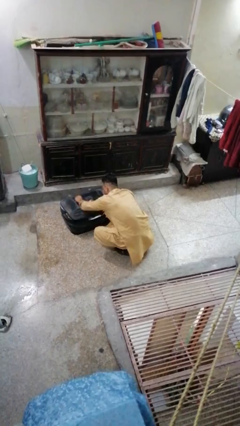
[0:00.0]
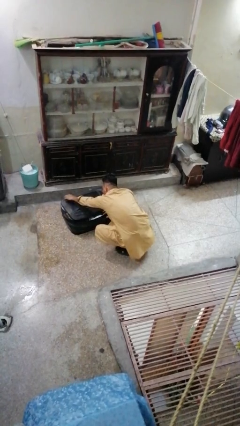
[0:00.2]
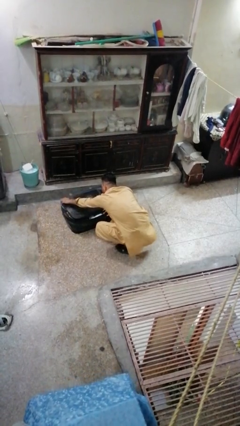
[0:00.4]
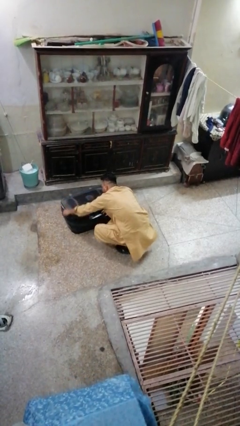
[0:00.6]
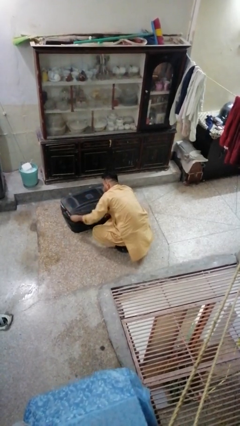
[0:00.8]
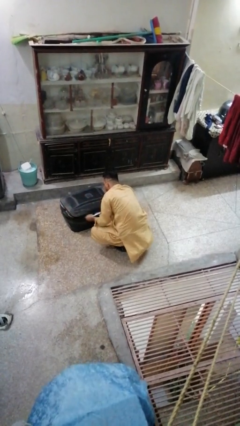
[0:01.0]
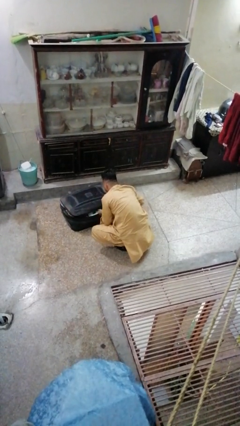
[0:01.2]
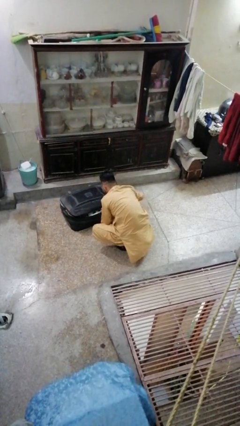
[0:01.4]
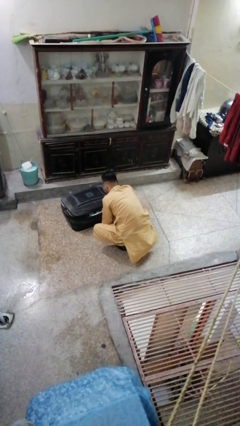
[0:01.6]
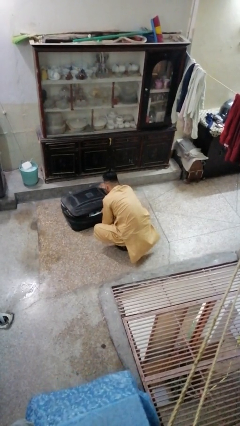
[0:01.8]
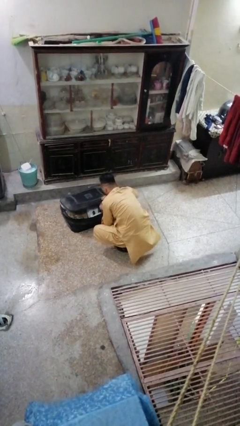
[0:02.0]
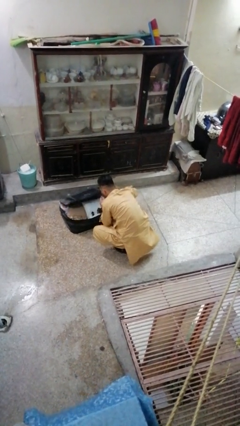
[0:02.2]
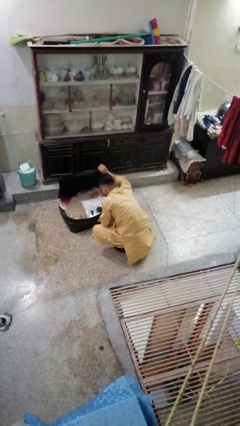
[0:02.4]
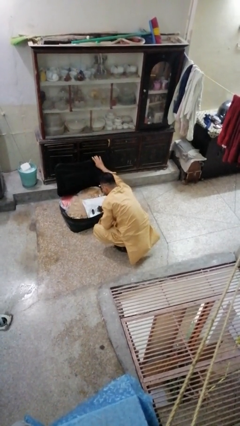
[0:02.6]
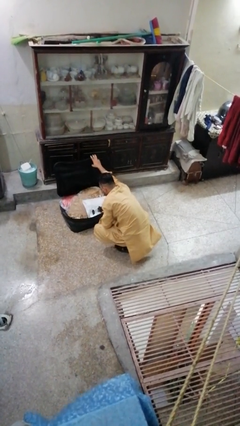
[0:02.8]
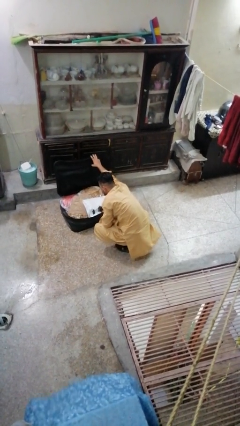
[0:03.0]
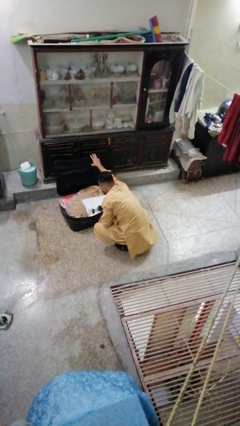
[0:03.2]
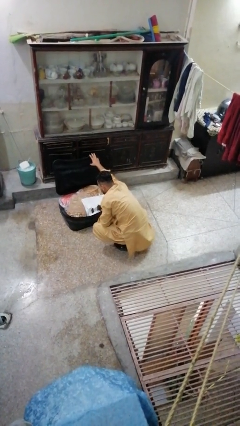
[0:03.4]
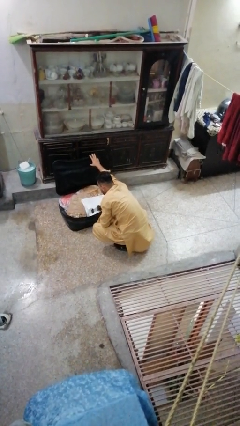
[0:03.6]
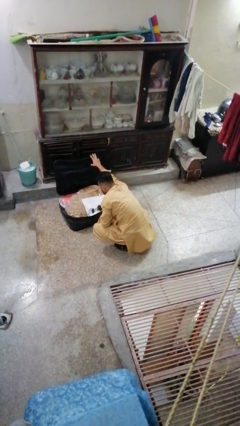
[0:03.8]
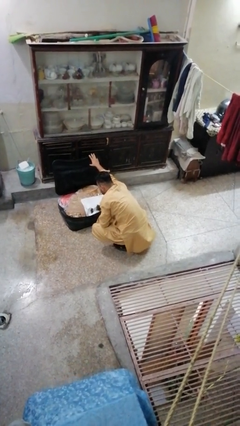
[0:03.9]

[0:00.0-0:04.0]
person opens suitcase

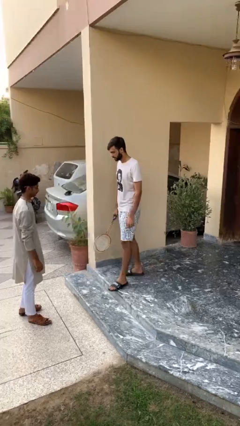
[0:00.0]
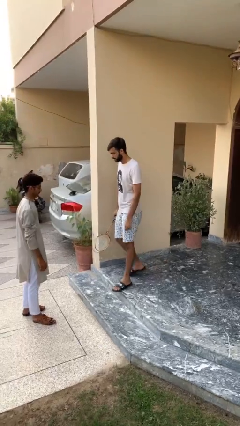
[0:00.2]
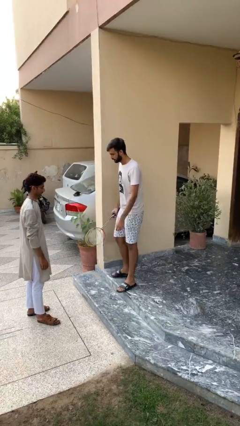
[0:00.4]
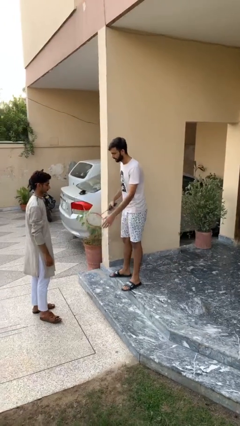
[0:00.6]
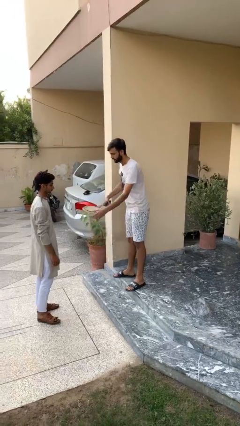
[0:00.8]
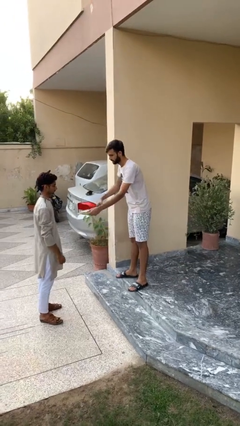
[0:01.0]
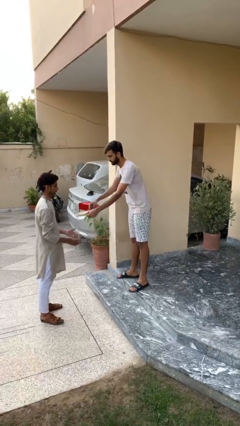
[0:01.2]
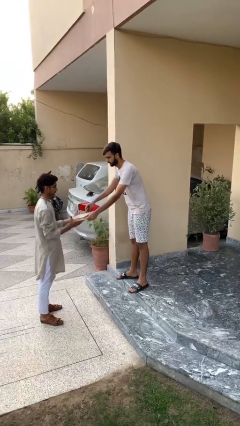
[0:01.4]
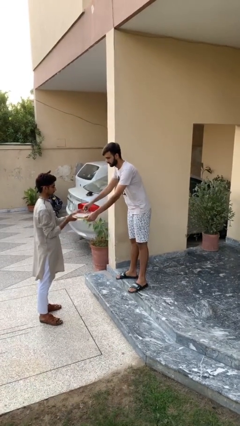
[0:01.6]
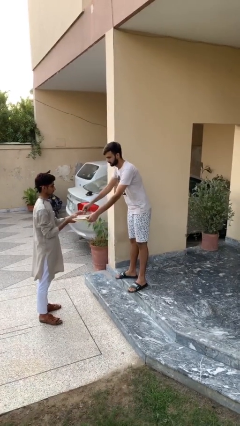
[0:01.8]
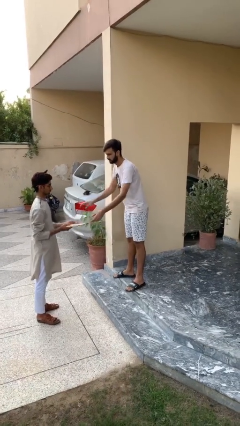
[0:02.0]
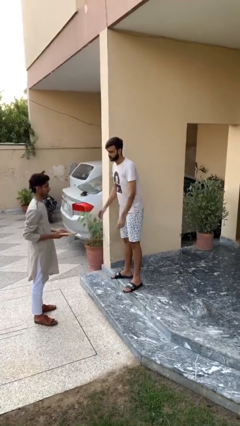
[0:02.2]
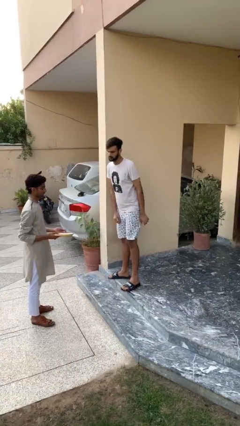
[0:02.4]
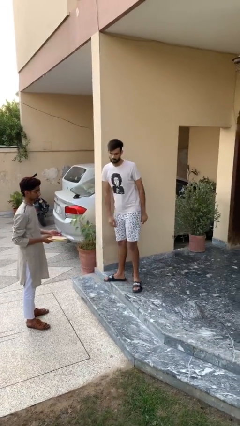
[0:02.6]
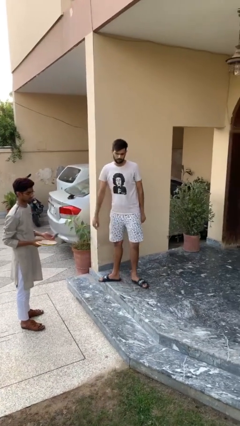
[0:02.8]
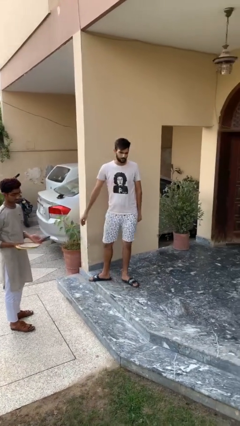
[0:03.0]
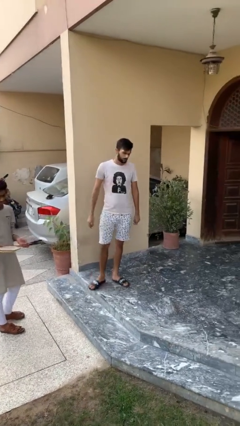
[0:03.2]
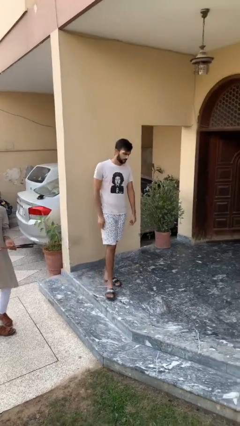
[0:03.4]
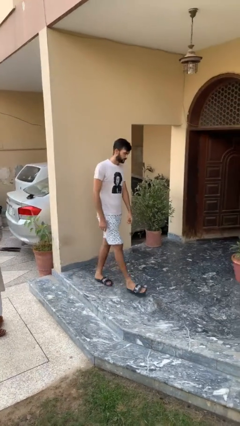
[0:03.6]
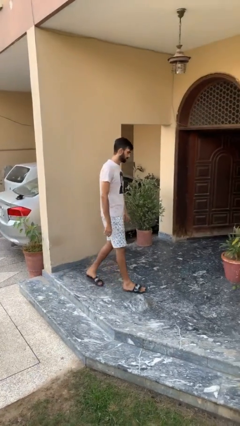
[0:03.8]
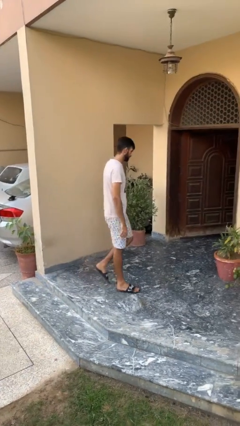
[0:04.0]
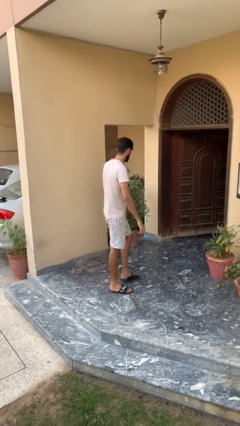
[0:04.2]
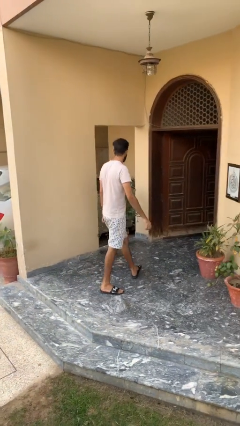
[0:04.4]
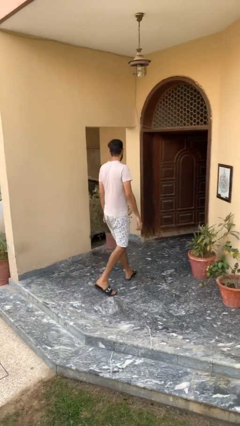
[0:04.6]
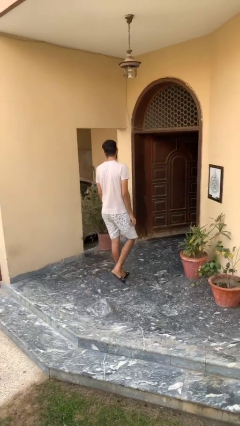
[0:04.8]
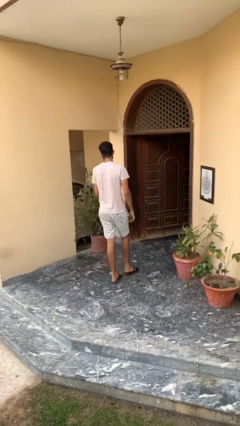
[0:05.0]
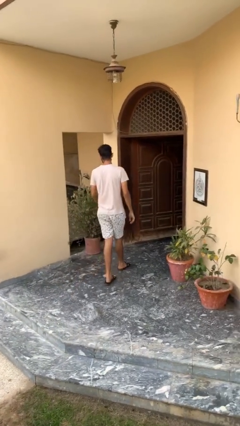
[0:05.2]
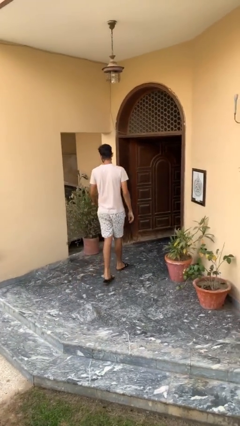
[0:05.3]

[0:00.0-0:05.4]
person transfers object to person

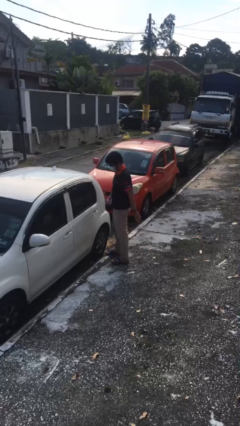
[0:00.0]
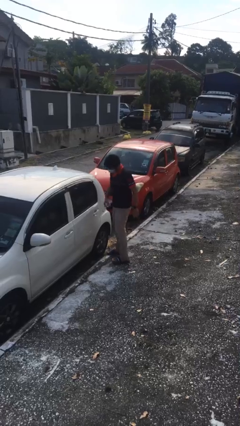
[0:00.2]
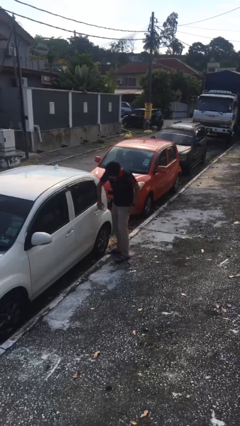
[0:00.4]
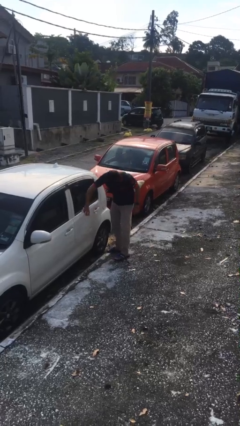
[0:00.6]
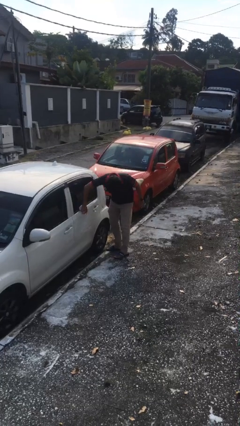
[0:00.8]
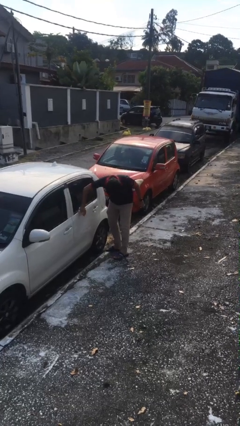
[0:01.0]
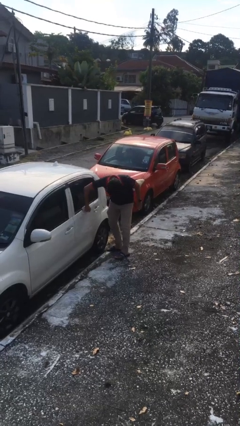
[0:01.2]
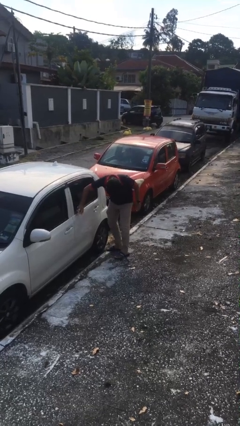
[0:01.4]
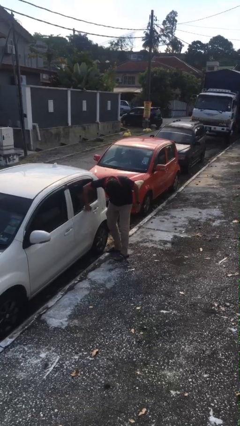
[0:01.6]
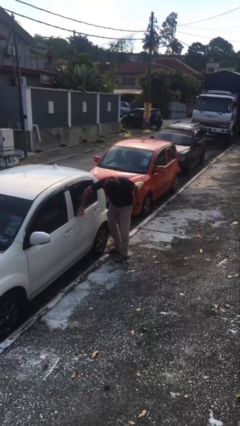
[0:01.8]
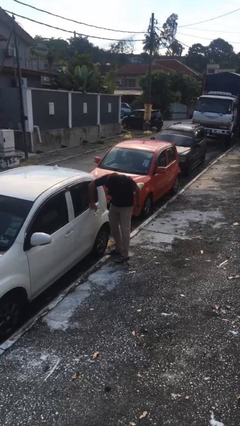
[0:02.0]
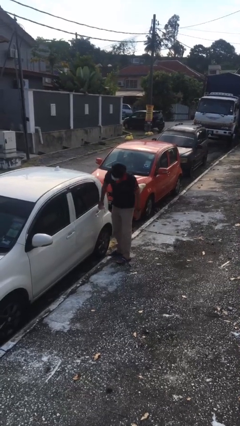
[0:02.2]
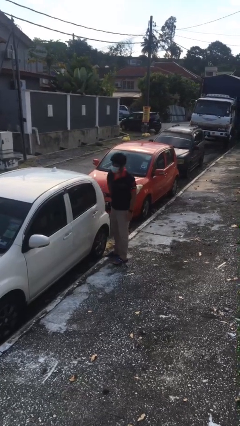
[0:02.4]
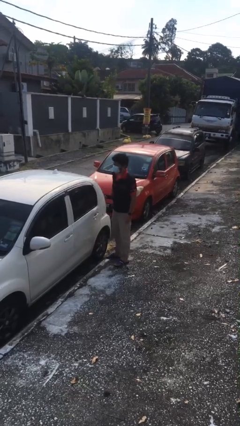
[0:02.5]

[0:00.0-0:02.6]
person polishes car with rag

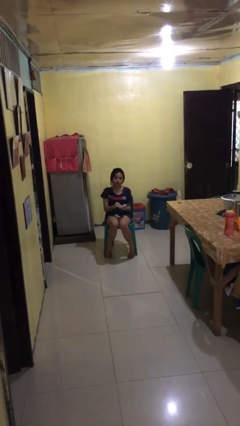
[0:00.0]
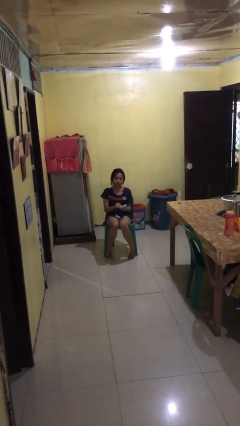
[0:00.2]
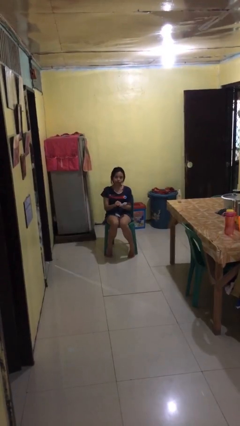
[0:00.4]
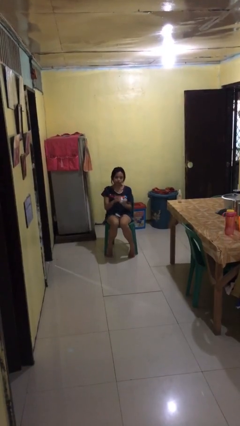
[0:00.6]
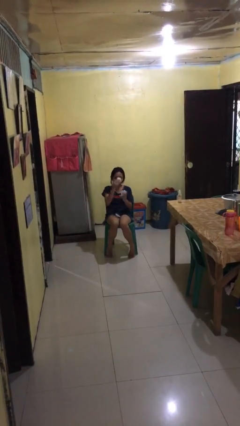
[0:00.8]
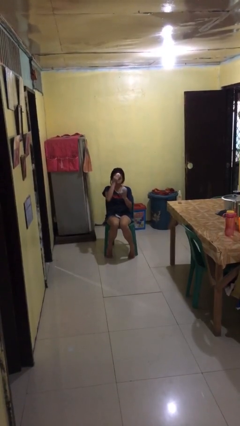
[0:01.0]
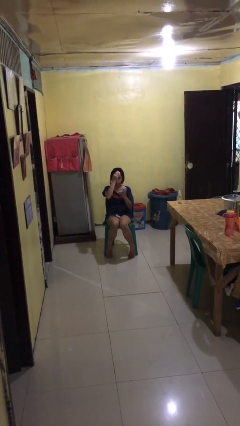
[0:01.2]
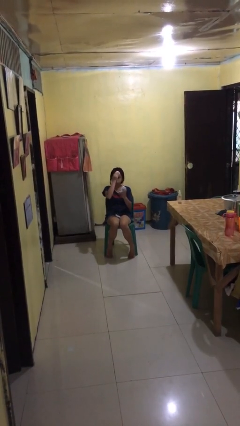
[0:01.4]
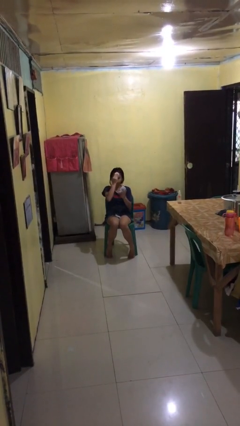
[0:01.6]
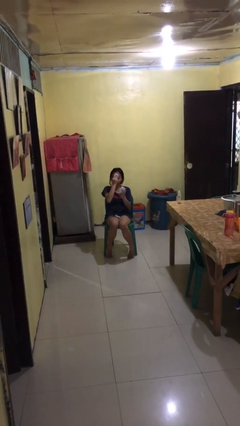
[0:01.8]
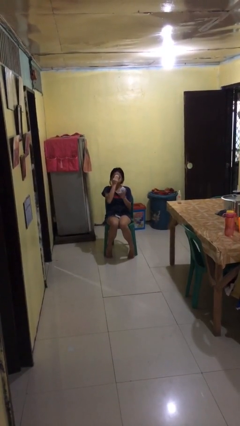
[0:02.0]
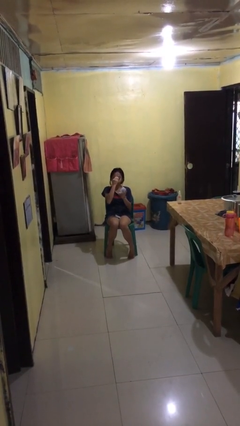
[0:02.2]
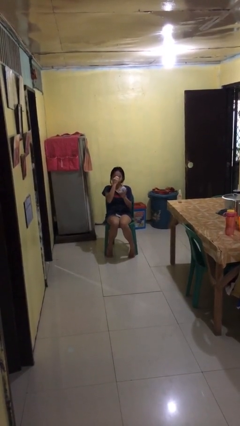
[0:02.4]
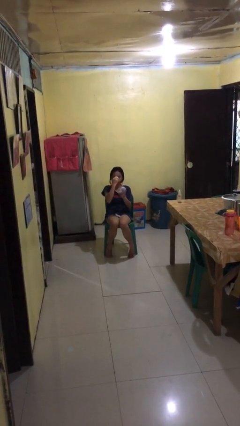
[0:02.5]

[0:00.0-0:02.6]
person applies foundation makeup

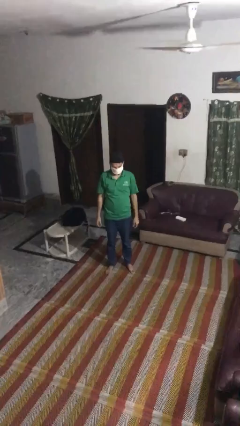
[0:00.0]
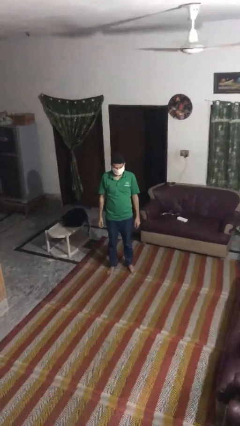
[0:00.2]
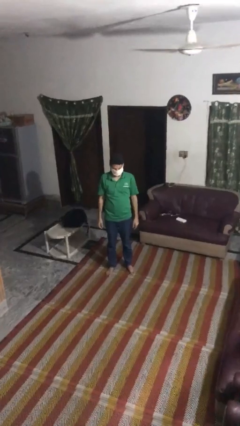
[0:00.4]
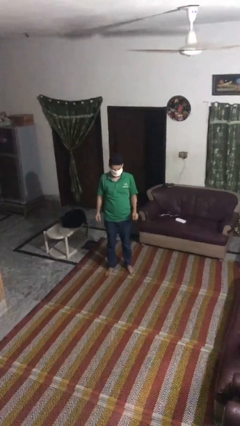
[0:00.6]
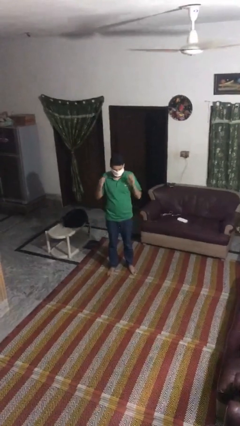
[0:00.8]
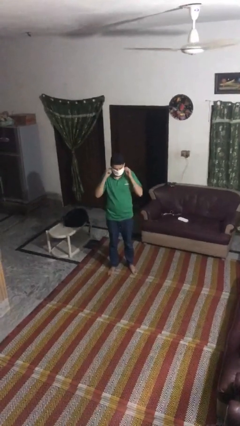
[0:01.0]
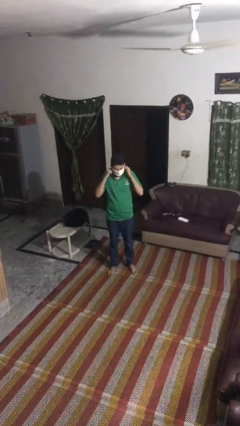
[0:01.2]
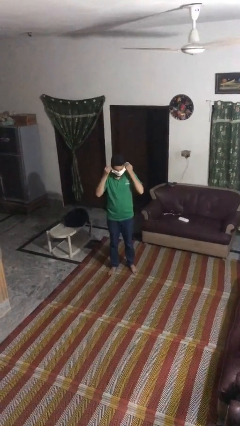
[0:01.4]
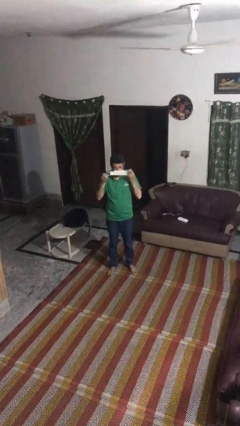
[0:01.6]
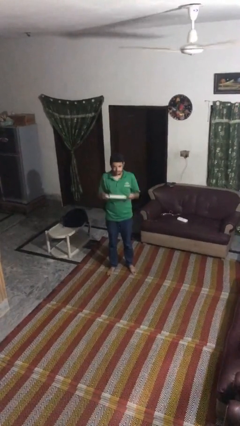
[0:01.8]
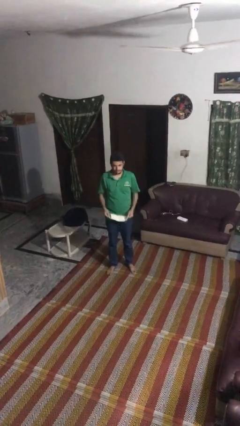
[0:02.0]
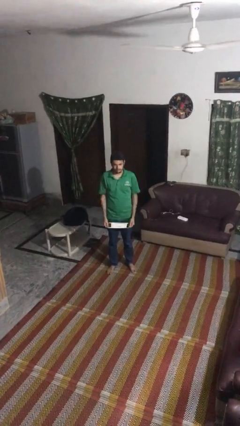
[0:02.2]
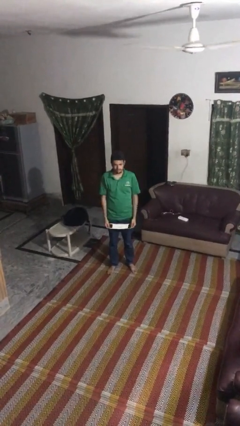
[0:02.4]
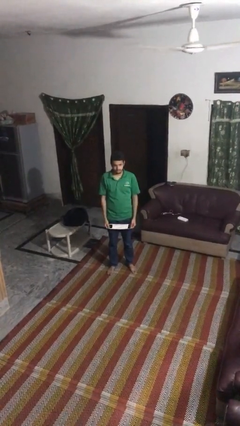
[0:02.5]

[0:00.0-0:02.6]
person takes off facemask

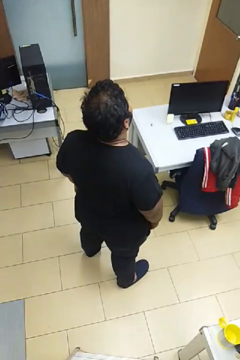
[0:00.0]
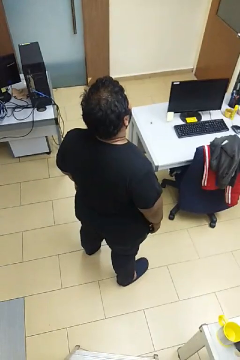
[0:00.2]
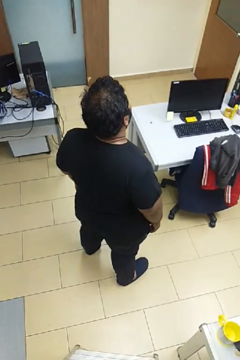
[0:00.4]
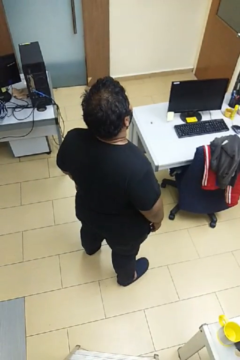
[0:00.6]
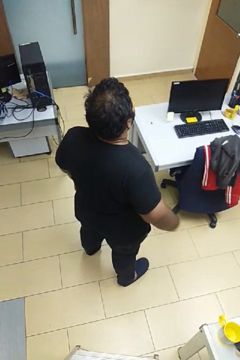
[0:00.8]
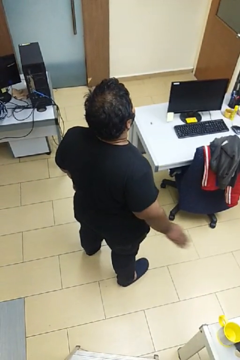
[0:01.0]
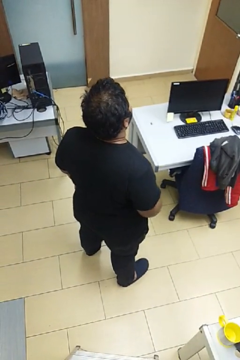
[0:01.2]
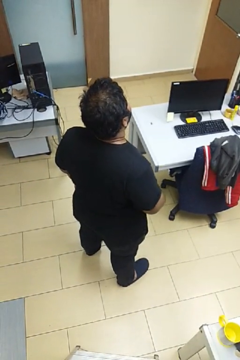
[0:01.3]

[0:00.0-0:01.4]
person slaps hands on thighs
